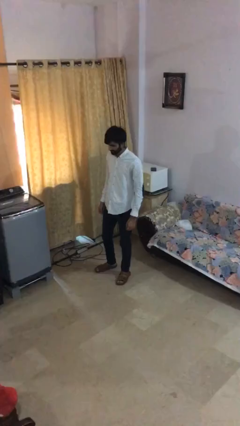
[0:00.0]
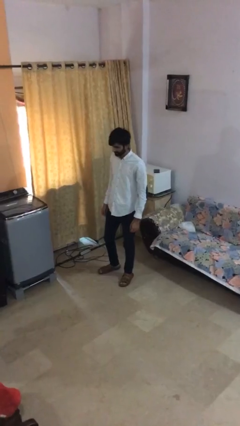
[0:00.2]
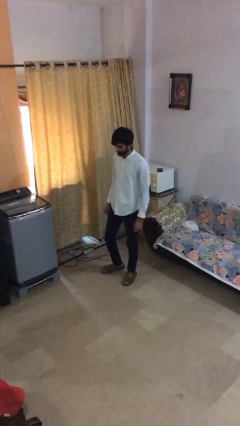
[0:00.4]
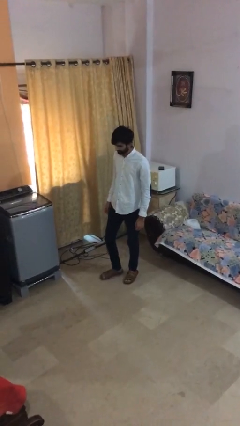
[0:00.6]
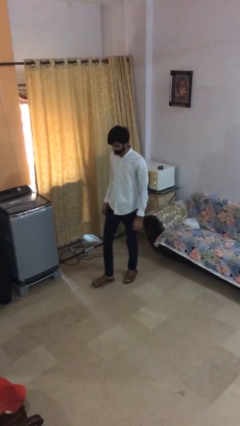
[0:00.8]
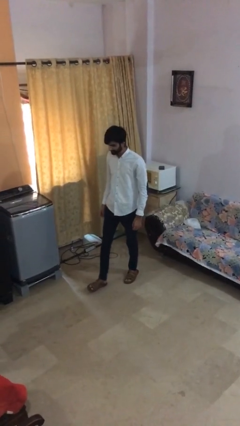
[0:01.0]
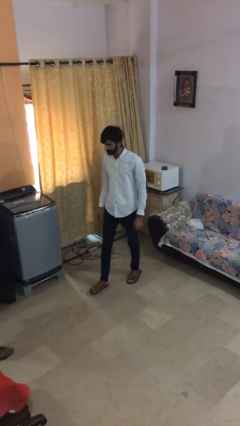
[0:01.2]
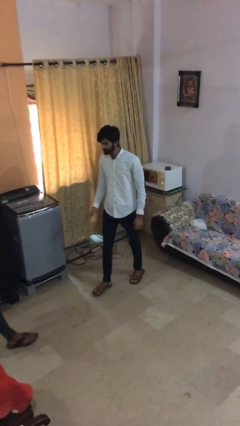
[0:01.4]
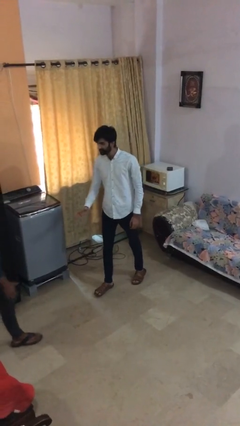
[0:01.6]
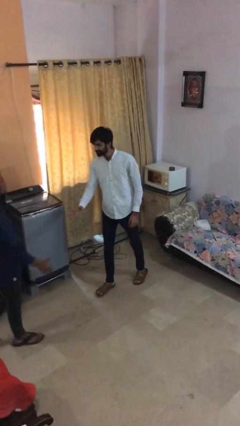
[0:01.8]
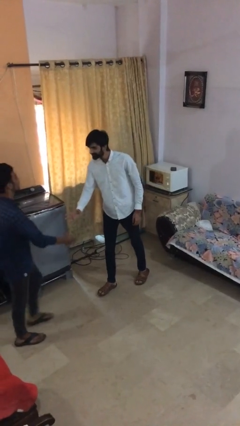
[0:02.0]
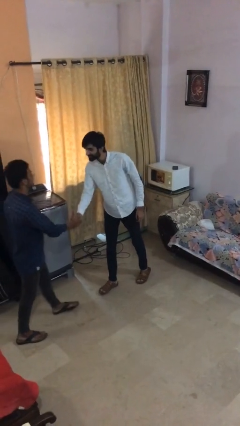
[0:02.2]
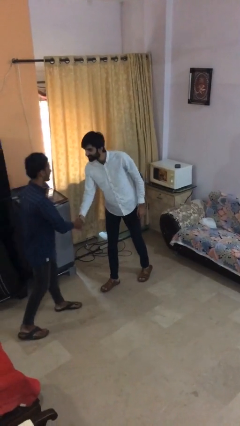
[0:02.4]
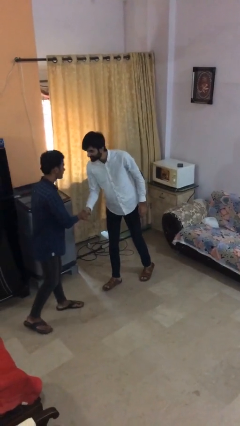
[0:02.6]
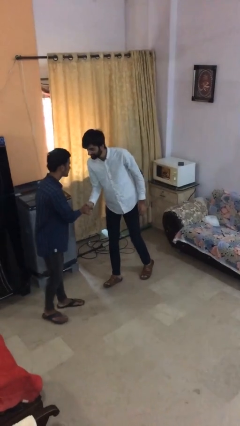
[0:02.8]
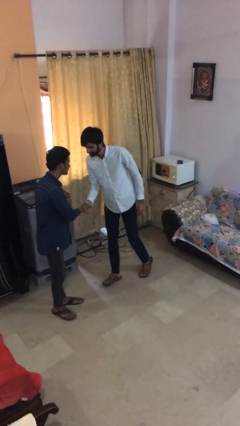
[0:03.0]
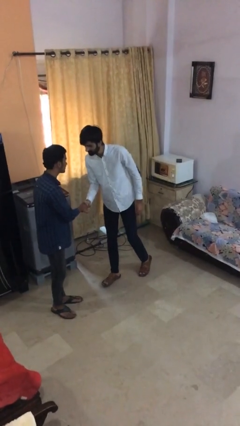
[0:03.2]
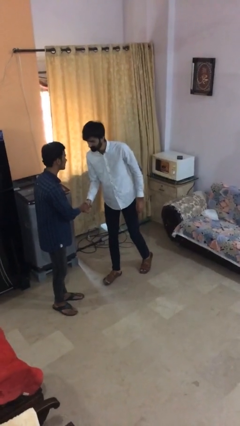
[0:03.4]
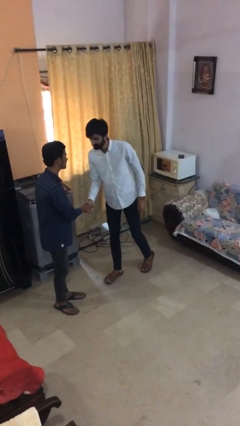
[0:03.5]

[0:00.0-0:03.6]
person shakes hand

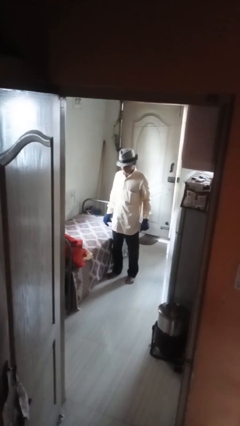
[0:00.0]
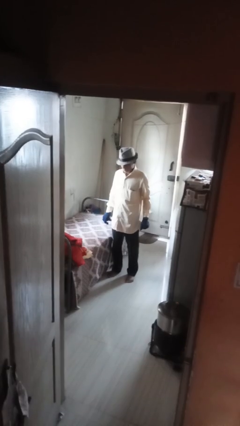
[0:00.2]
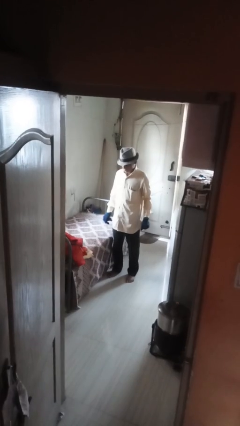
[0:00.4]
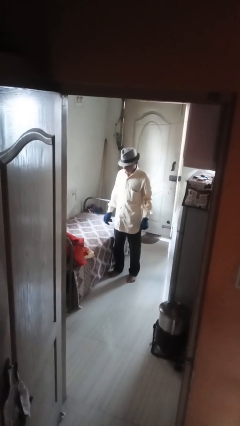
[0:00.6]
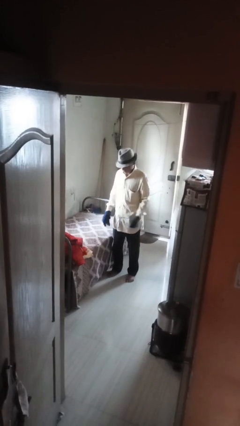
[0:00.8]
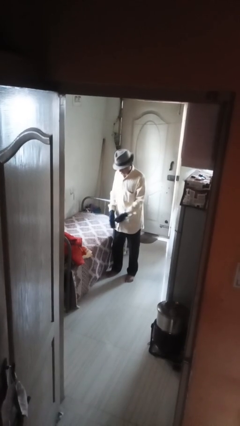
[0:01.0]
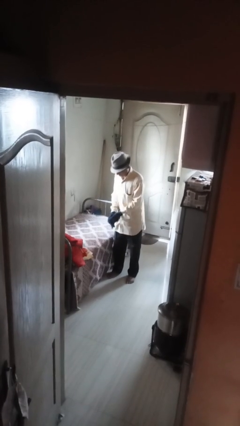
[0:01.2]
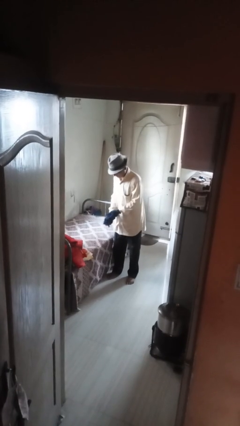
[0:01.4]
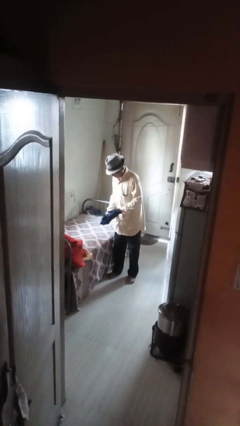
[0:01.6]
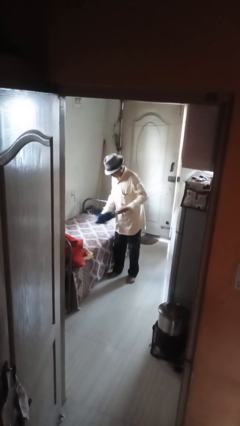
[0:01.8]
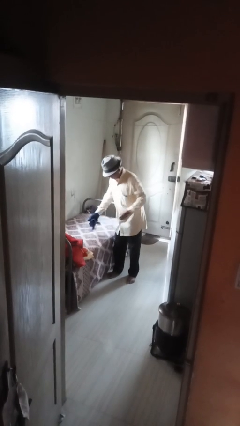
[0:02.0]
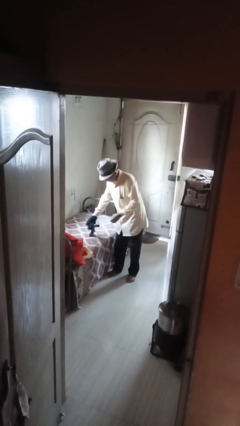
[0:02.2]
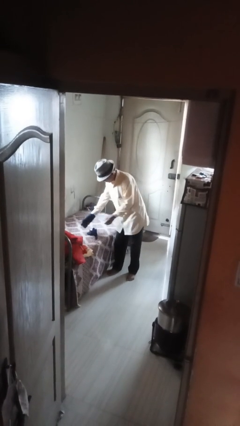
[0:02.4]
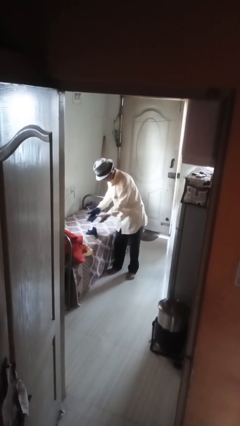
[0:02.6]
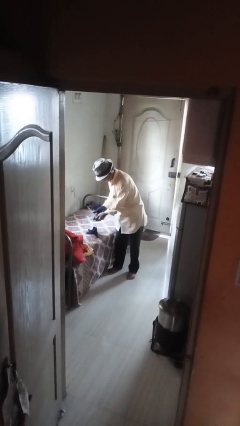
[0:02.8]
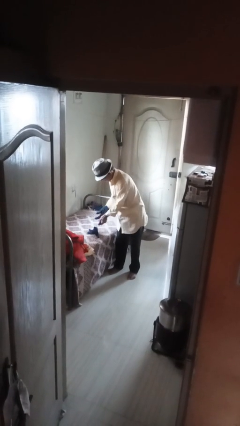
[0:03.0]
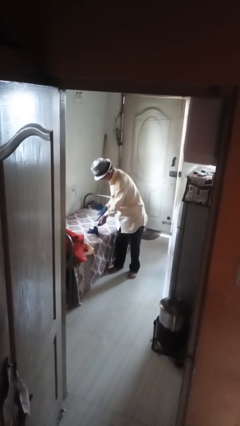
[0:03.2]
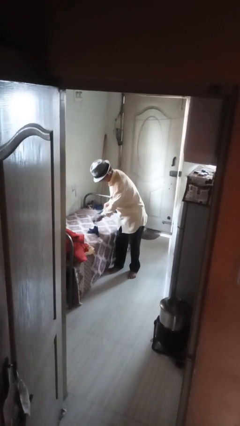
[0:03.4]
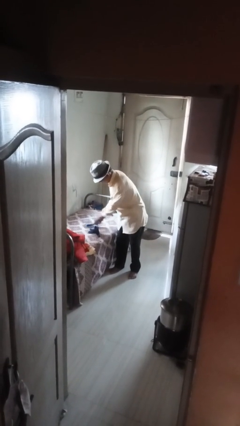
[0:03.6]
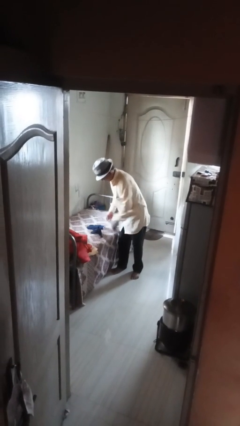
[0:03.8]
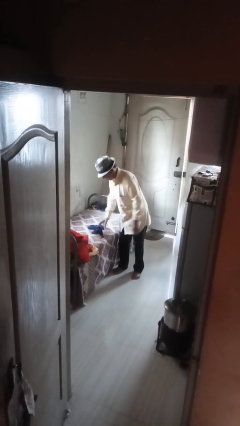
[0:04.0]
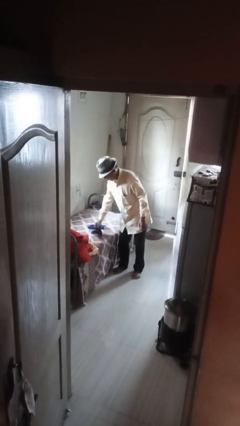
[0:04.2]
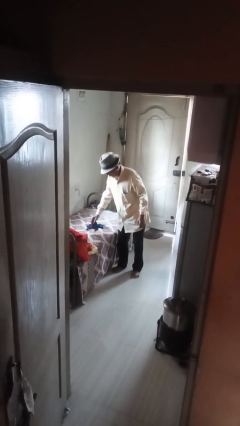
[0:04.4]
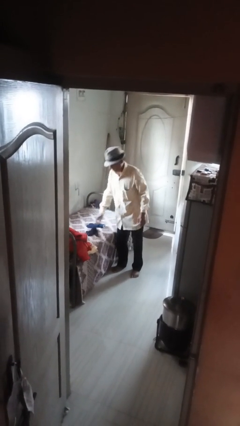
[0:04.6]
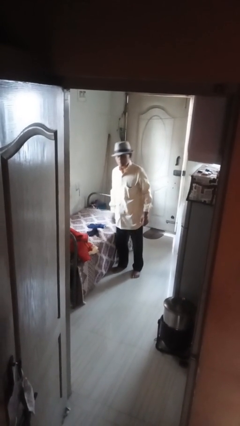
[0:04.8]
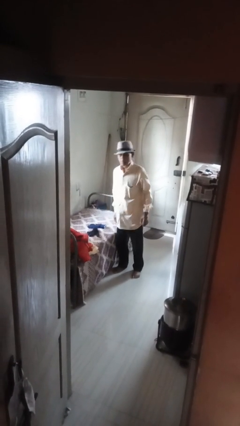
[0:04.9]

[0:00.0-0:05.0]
person takes off gloves

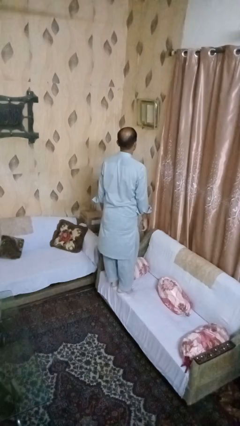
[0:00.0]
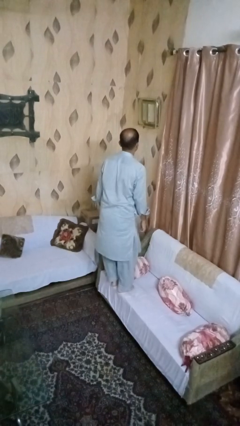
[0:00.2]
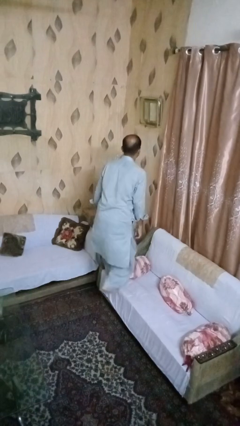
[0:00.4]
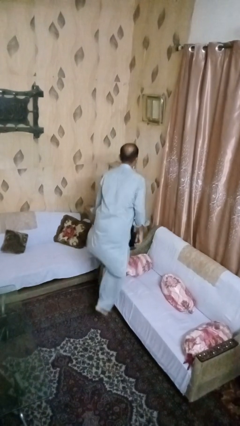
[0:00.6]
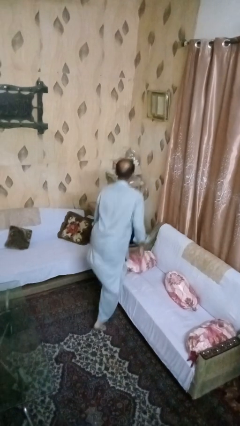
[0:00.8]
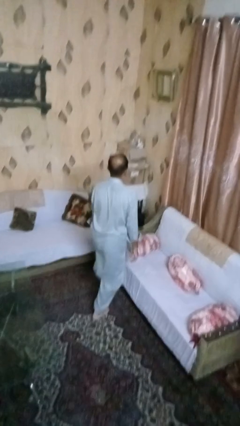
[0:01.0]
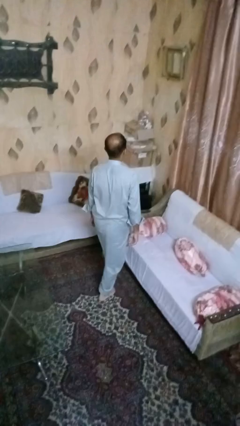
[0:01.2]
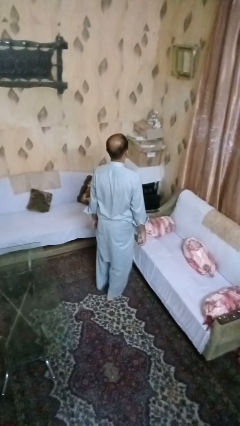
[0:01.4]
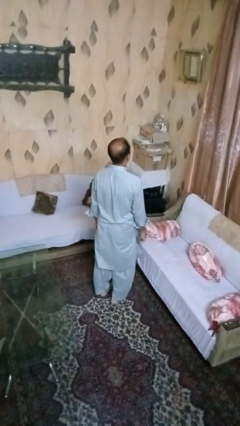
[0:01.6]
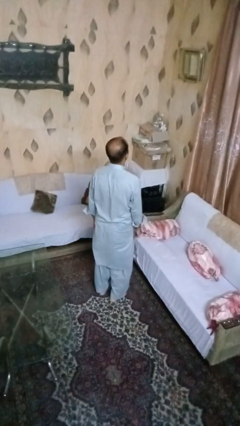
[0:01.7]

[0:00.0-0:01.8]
person climbs off couch

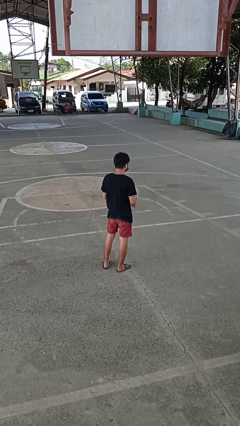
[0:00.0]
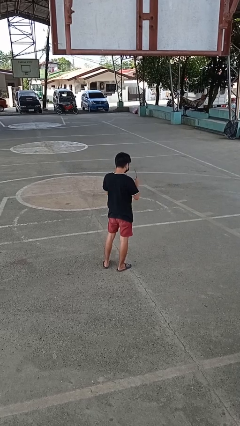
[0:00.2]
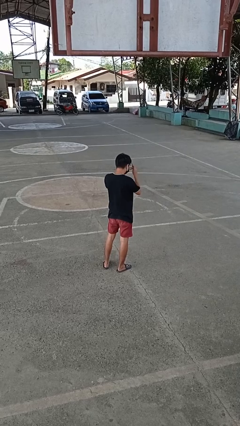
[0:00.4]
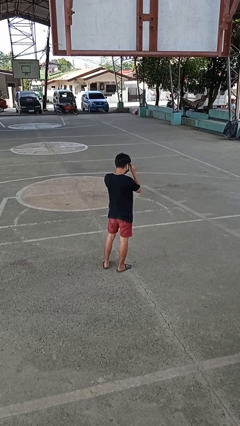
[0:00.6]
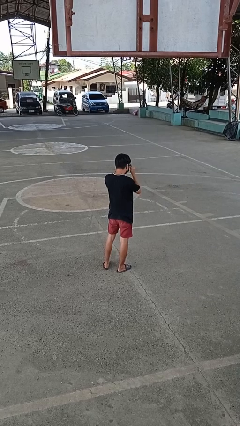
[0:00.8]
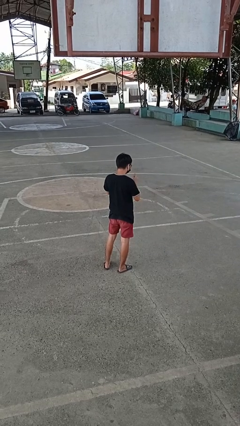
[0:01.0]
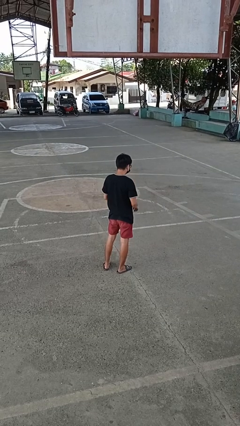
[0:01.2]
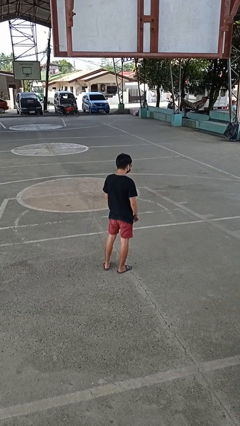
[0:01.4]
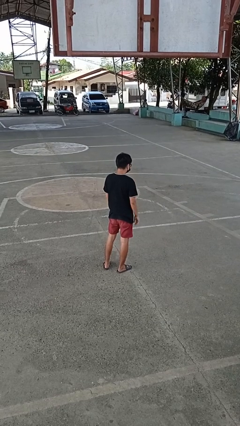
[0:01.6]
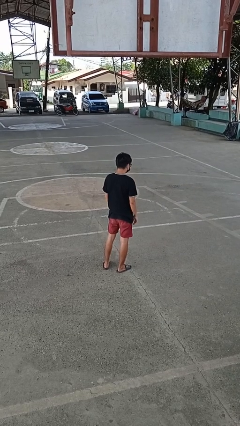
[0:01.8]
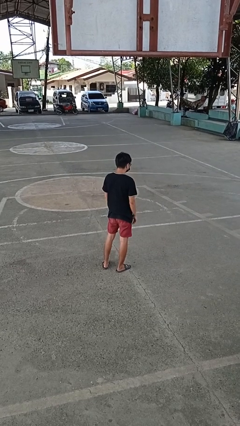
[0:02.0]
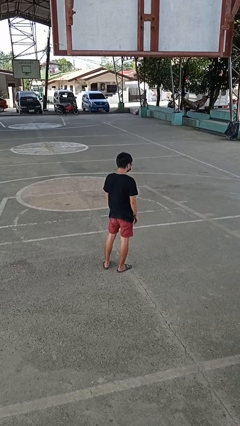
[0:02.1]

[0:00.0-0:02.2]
person puts on glasses

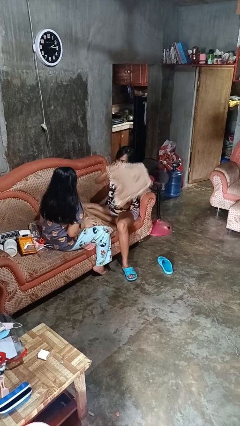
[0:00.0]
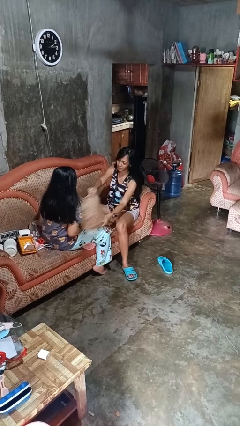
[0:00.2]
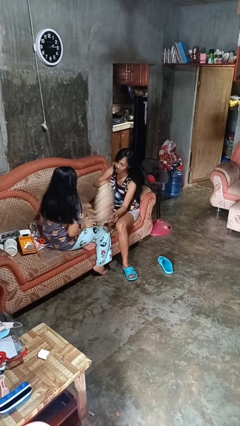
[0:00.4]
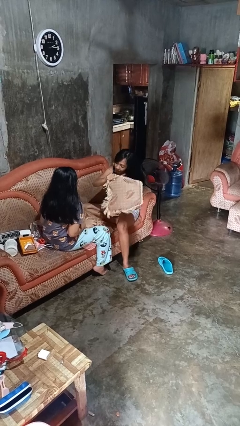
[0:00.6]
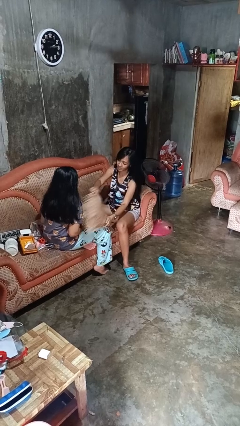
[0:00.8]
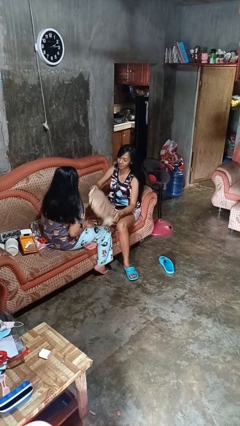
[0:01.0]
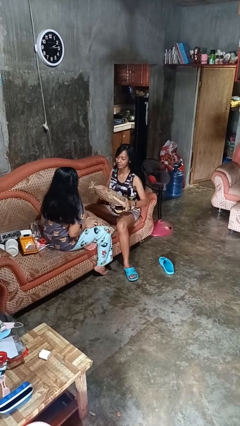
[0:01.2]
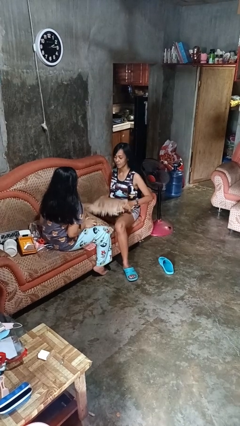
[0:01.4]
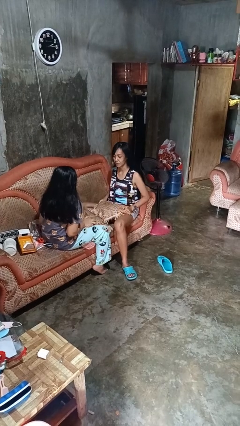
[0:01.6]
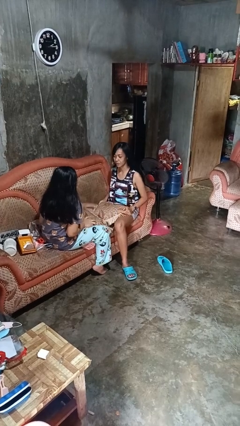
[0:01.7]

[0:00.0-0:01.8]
person hits person with pillow

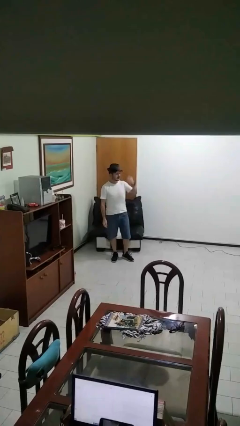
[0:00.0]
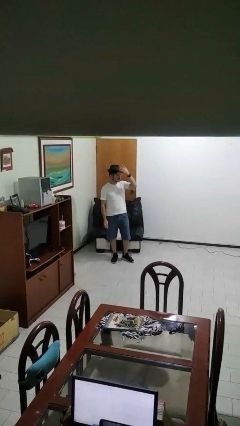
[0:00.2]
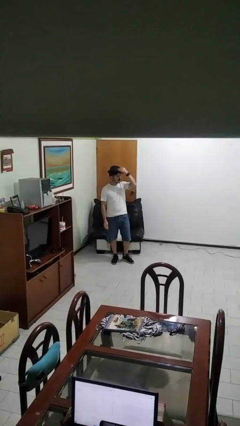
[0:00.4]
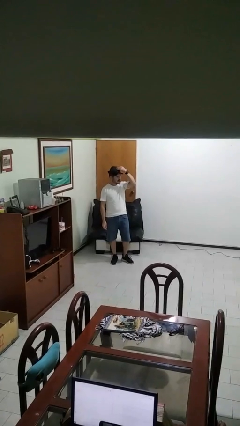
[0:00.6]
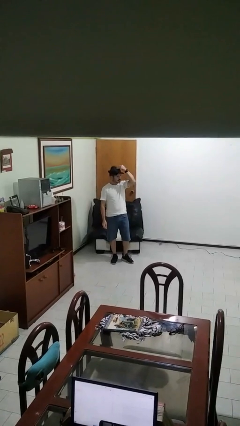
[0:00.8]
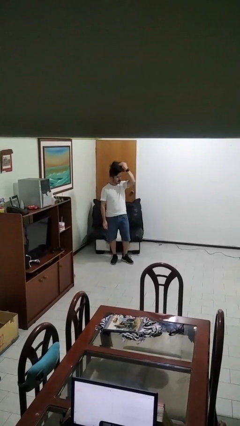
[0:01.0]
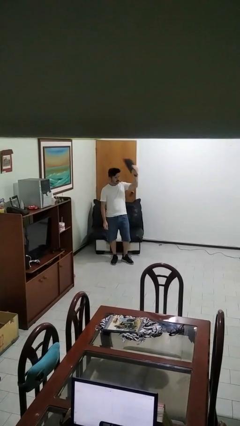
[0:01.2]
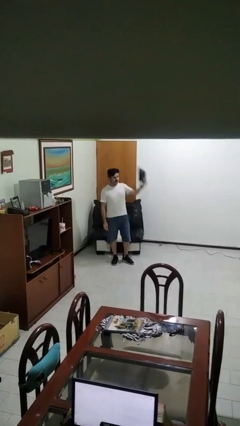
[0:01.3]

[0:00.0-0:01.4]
person takes off hat

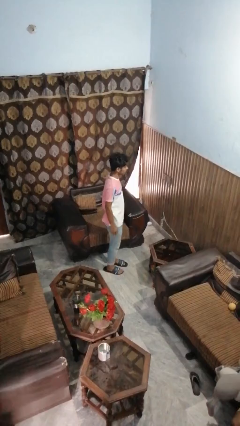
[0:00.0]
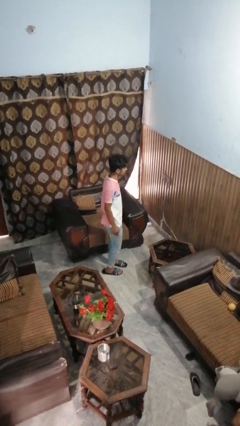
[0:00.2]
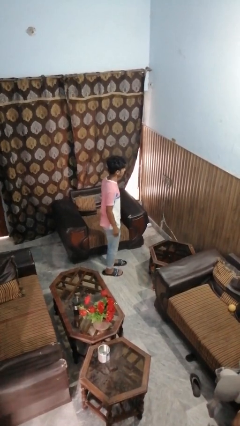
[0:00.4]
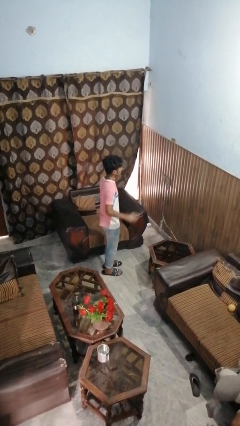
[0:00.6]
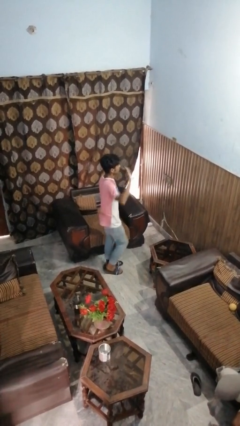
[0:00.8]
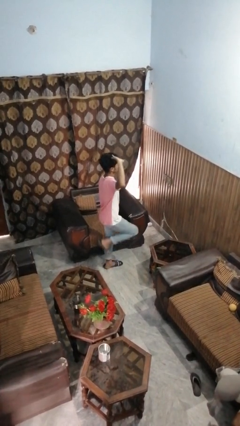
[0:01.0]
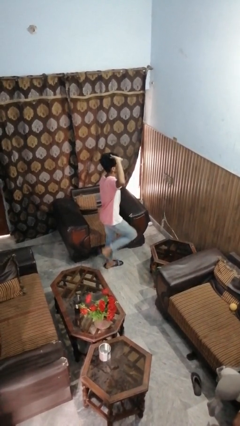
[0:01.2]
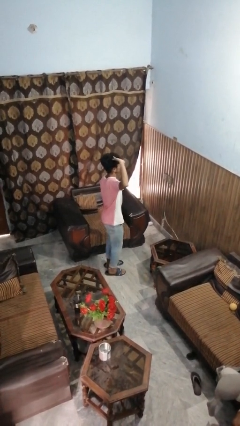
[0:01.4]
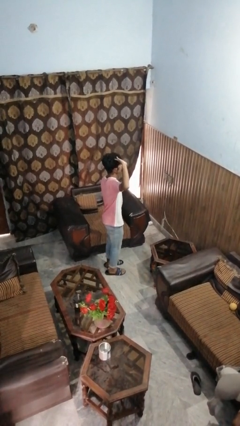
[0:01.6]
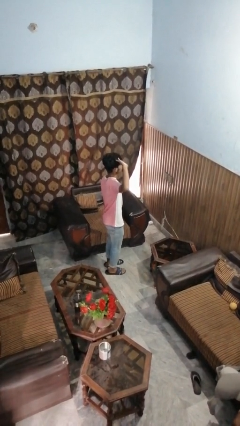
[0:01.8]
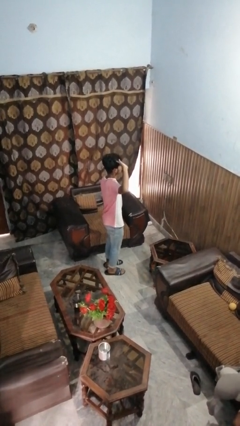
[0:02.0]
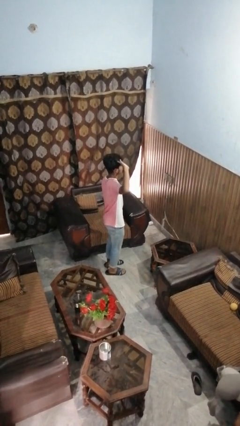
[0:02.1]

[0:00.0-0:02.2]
person salutes
